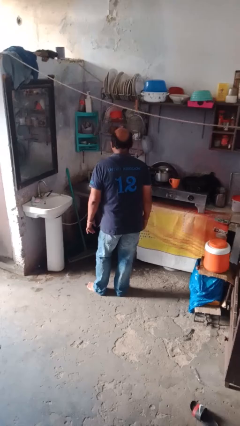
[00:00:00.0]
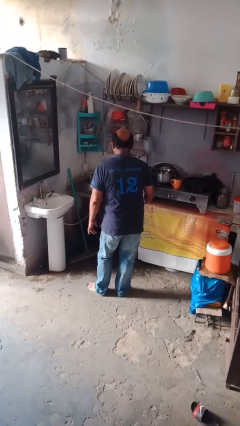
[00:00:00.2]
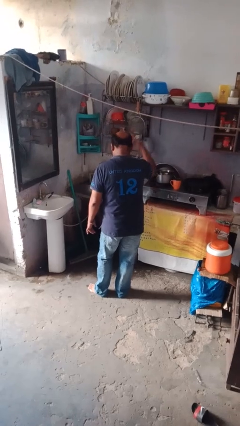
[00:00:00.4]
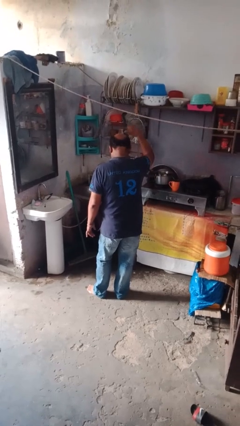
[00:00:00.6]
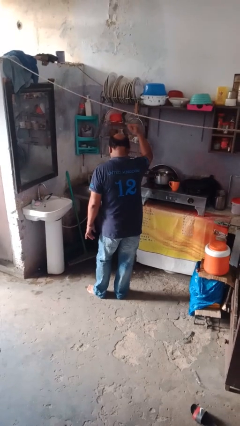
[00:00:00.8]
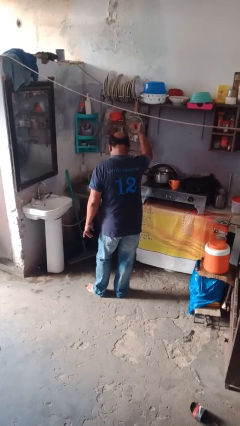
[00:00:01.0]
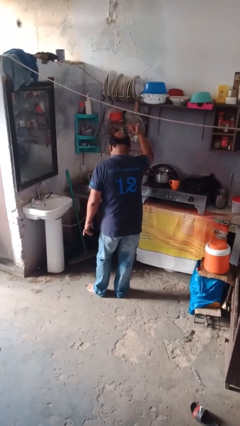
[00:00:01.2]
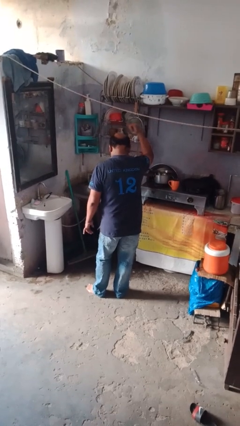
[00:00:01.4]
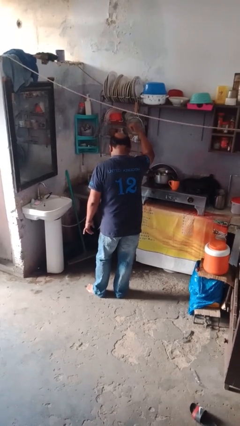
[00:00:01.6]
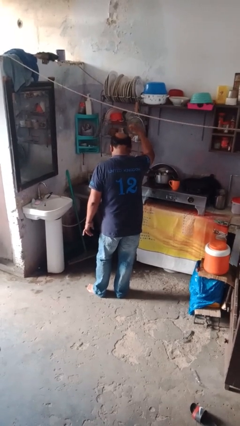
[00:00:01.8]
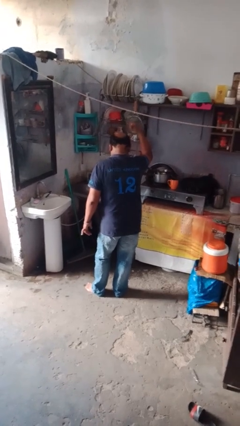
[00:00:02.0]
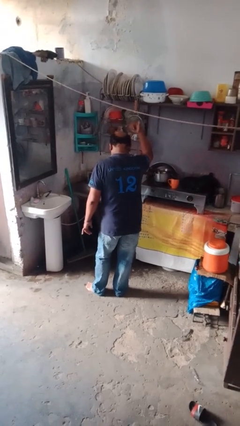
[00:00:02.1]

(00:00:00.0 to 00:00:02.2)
person gestures hang loose

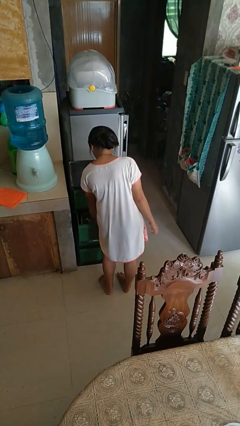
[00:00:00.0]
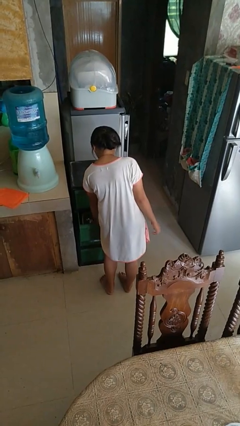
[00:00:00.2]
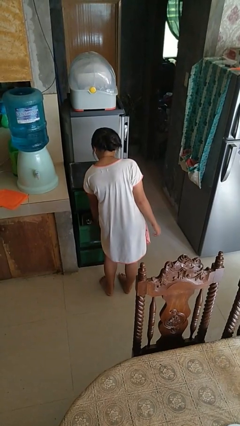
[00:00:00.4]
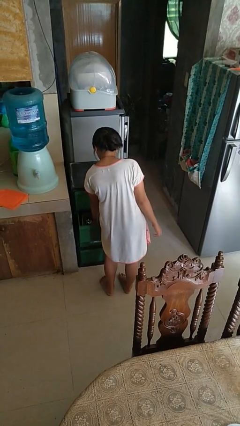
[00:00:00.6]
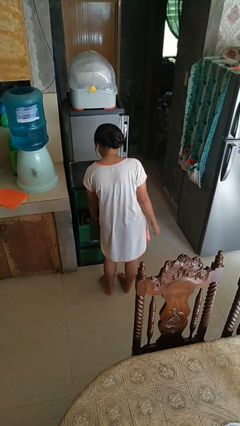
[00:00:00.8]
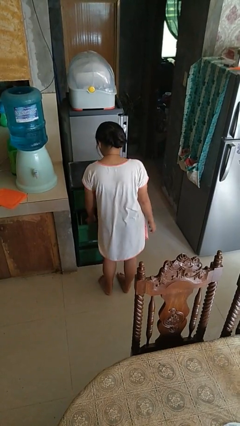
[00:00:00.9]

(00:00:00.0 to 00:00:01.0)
person puts object into kitchen drawer

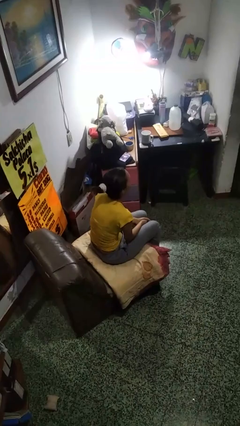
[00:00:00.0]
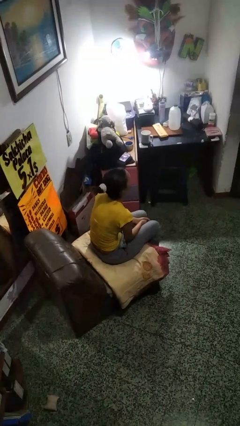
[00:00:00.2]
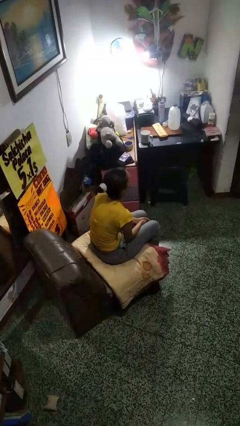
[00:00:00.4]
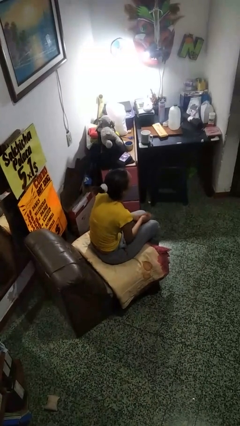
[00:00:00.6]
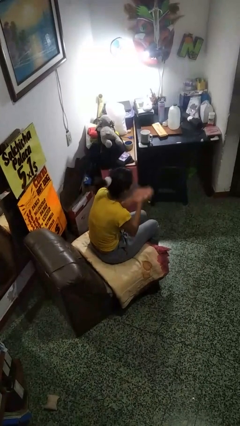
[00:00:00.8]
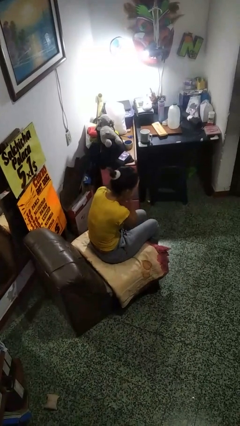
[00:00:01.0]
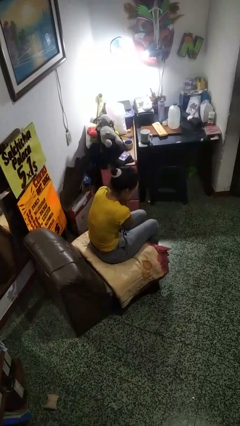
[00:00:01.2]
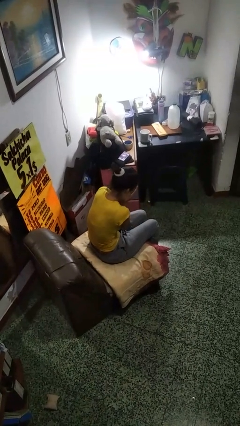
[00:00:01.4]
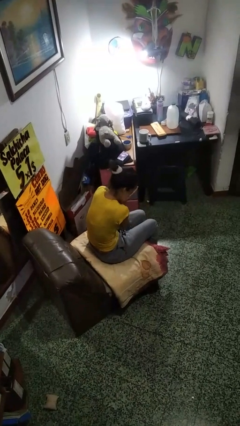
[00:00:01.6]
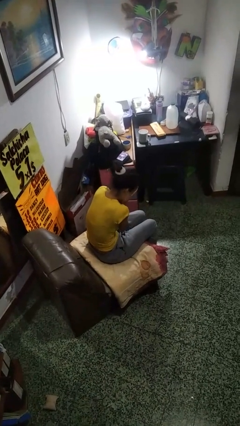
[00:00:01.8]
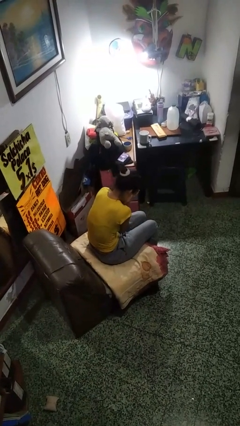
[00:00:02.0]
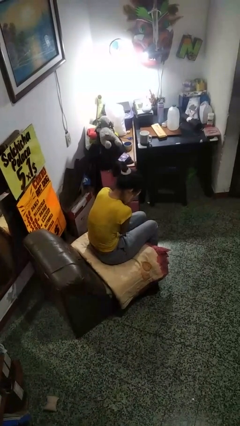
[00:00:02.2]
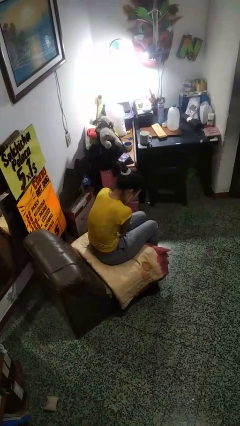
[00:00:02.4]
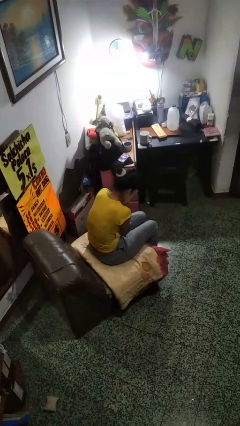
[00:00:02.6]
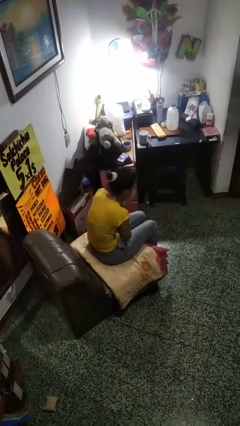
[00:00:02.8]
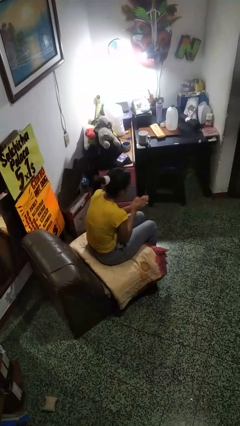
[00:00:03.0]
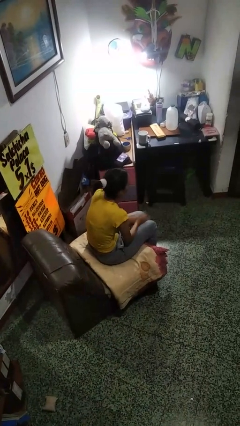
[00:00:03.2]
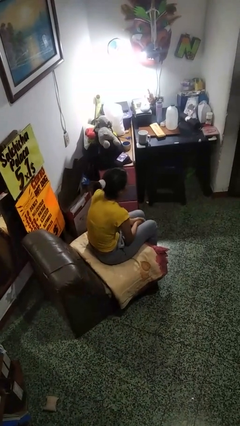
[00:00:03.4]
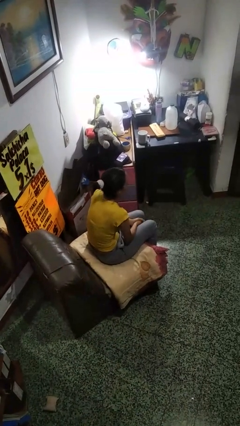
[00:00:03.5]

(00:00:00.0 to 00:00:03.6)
person covers face with hands

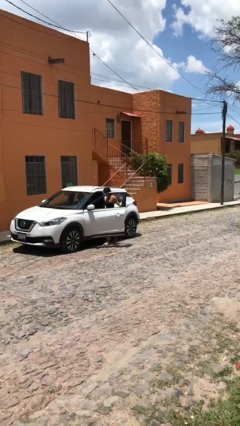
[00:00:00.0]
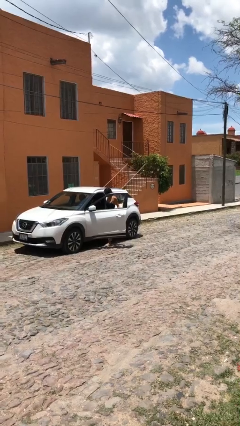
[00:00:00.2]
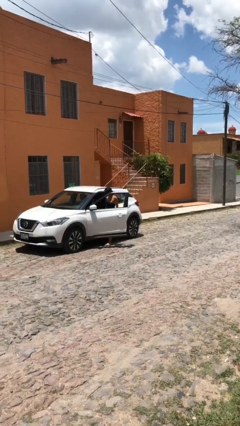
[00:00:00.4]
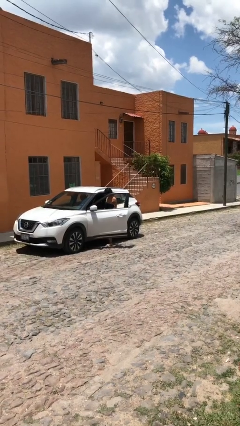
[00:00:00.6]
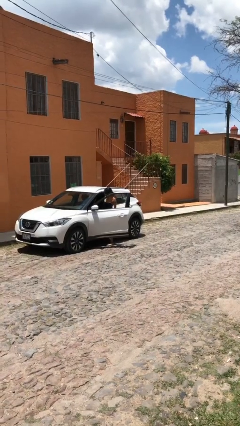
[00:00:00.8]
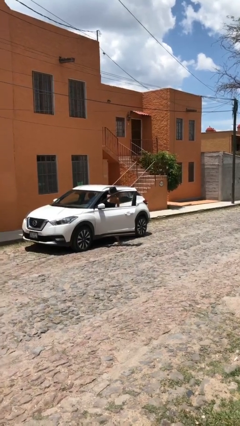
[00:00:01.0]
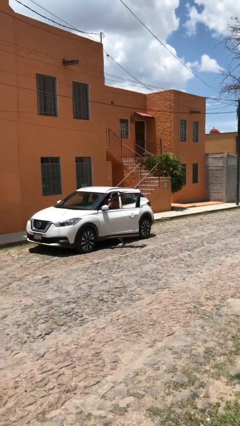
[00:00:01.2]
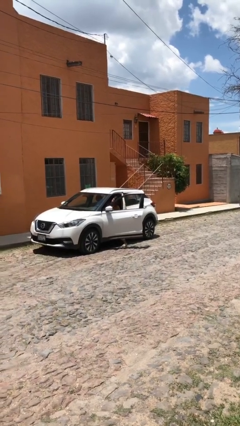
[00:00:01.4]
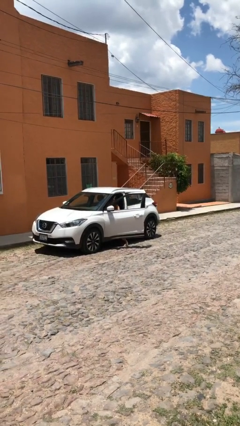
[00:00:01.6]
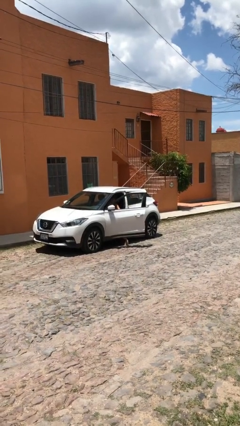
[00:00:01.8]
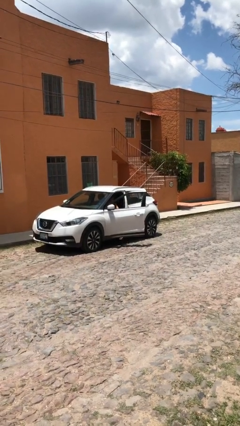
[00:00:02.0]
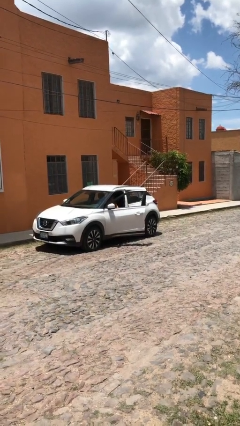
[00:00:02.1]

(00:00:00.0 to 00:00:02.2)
person enters car

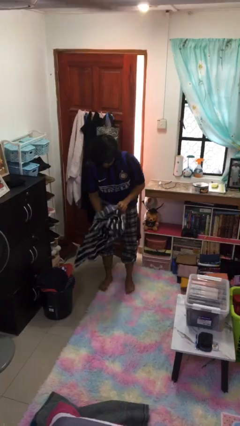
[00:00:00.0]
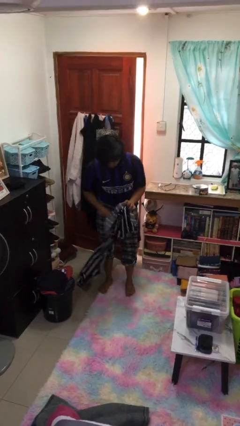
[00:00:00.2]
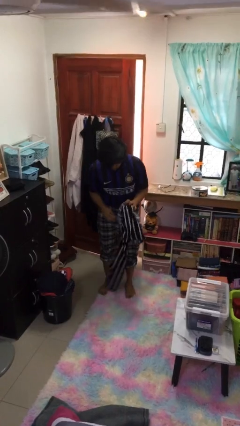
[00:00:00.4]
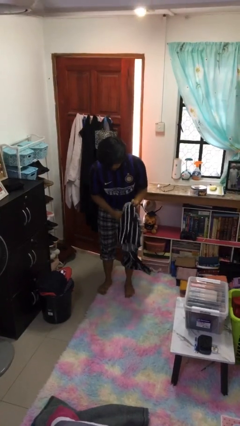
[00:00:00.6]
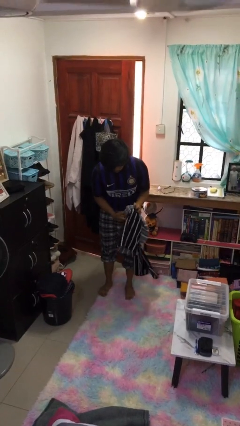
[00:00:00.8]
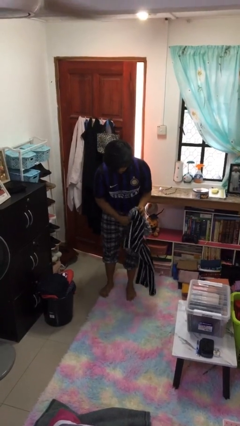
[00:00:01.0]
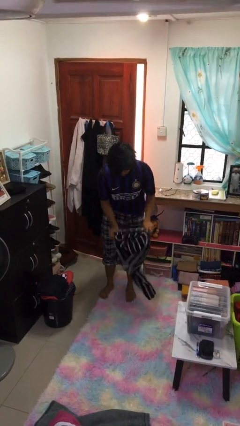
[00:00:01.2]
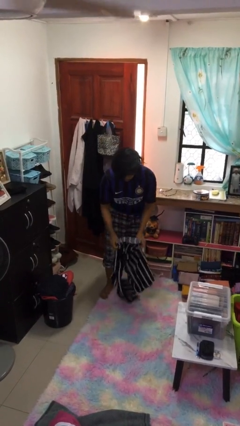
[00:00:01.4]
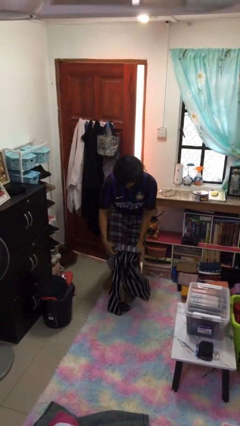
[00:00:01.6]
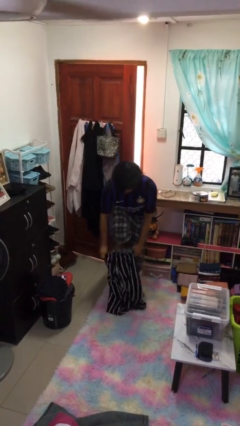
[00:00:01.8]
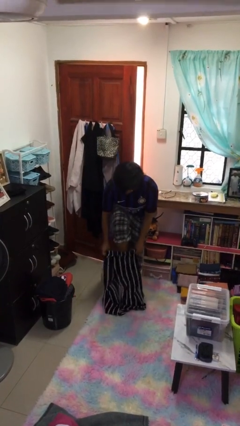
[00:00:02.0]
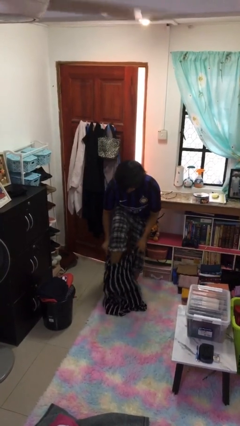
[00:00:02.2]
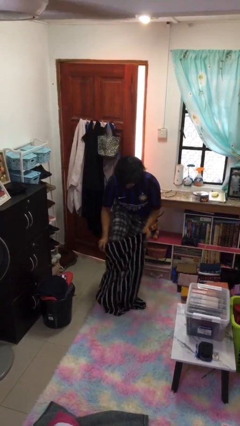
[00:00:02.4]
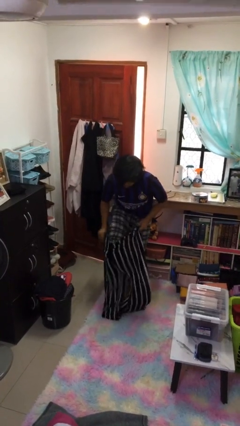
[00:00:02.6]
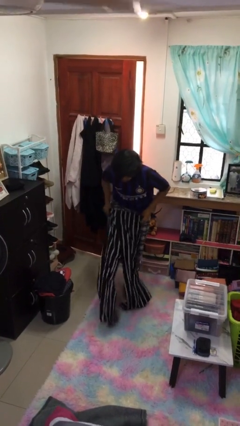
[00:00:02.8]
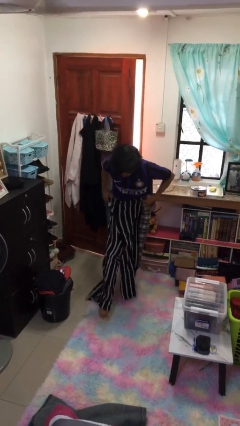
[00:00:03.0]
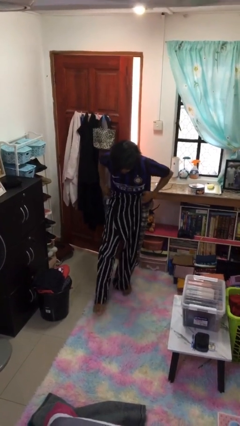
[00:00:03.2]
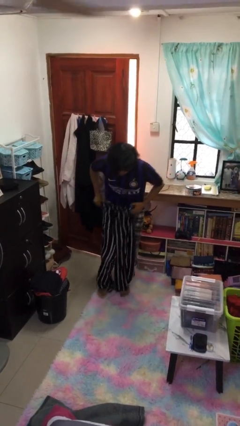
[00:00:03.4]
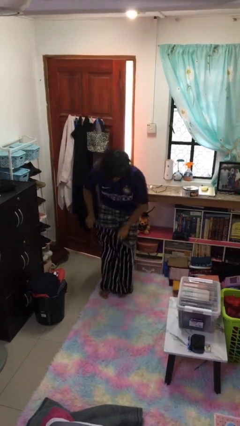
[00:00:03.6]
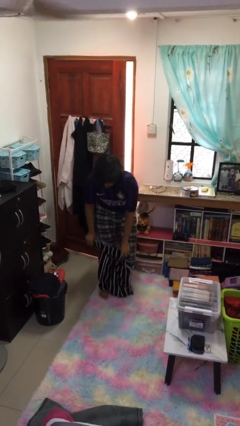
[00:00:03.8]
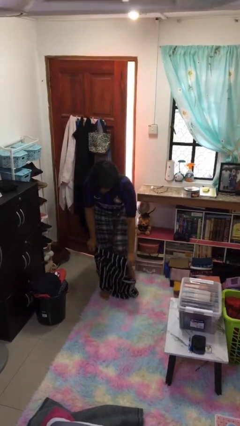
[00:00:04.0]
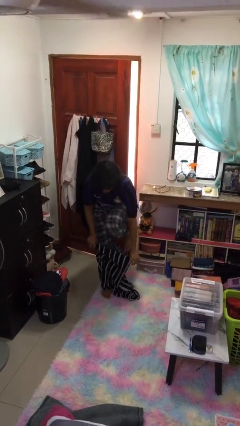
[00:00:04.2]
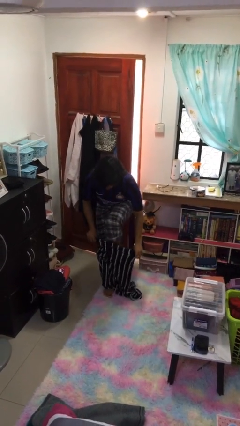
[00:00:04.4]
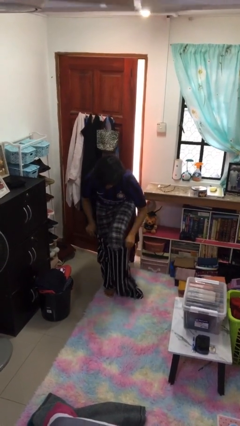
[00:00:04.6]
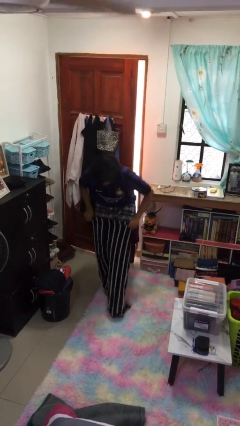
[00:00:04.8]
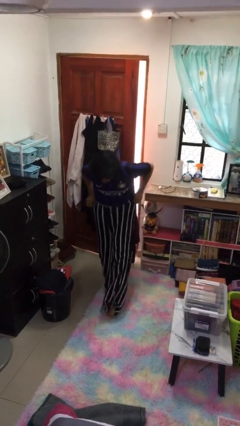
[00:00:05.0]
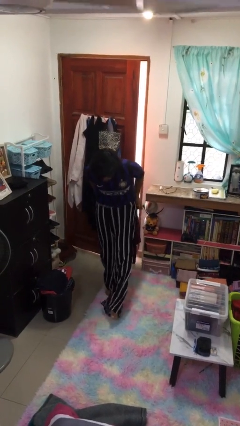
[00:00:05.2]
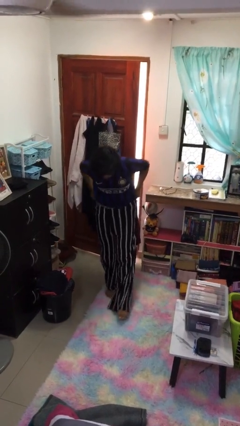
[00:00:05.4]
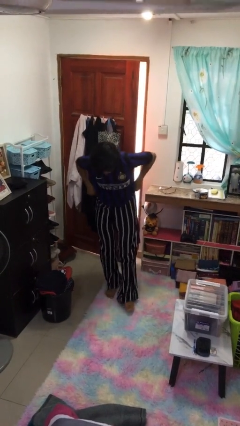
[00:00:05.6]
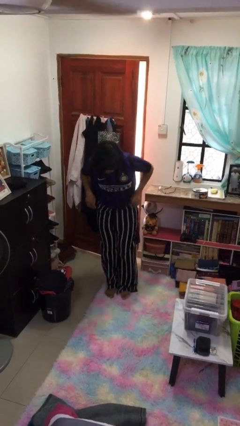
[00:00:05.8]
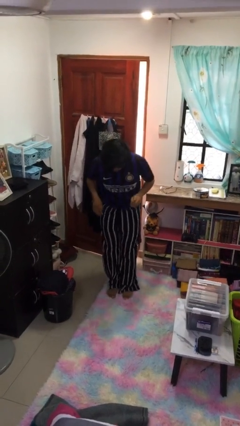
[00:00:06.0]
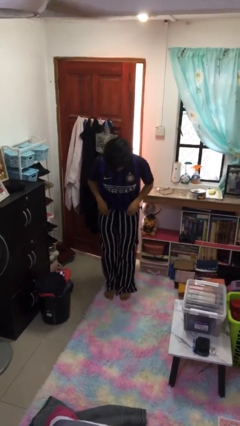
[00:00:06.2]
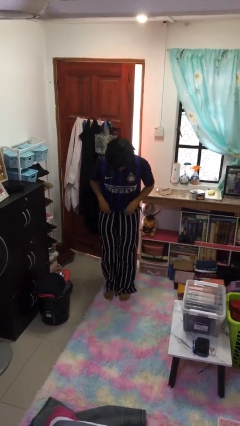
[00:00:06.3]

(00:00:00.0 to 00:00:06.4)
person puts on pants

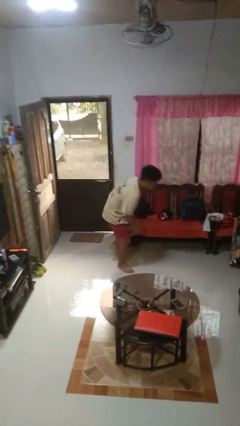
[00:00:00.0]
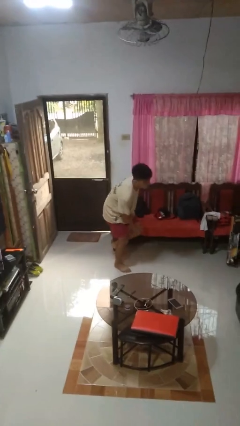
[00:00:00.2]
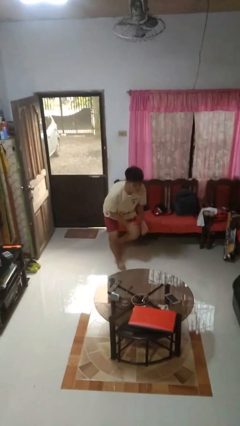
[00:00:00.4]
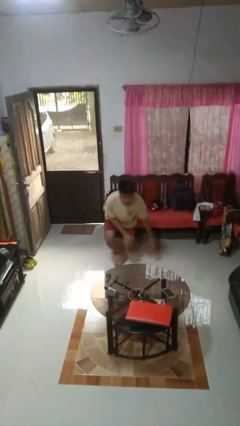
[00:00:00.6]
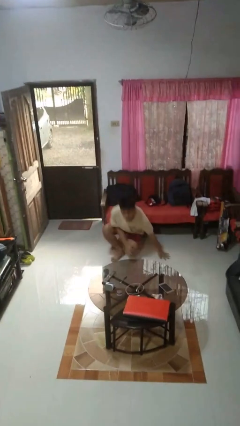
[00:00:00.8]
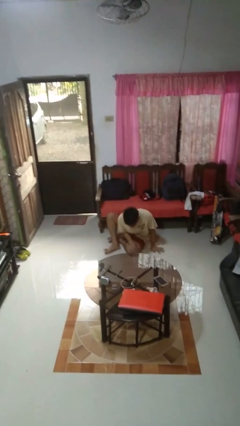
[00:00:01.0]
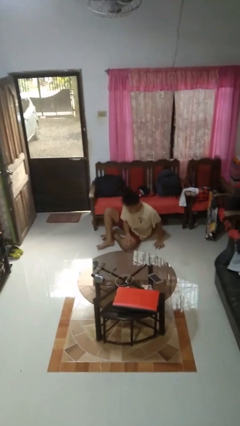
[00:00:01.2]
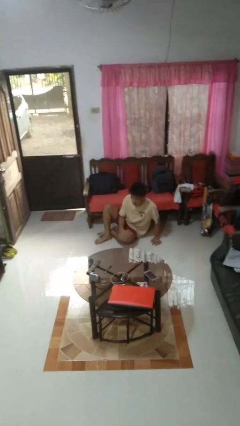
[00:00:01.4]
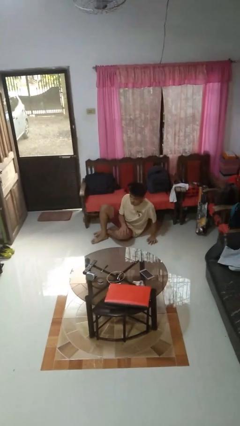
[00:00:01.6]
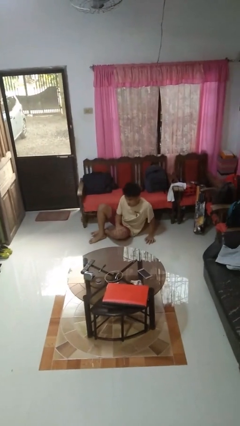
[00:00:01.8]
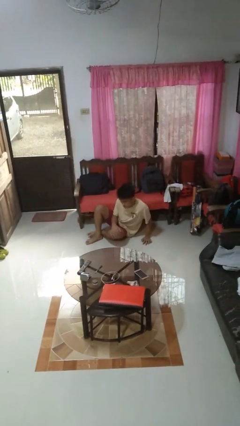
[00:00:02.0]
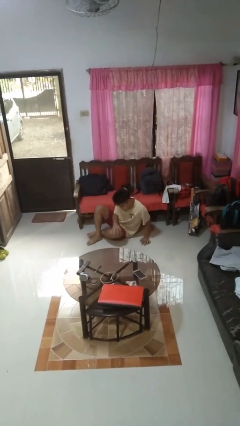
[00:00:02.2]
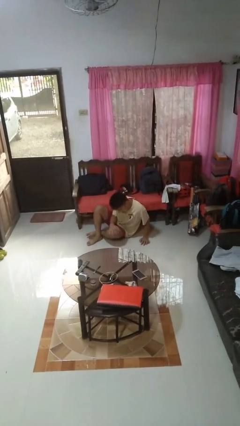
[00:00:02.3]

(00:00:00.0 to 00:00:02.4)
person lies down on floor
